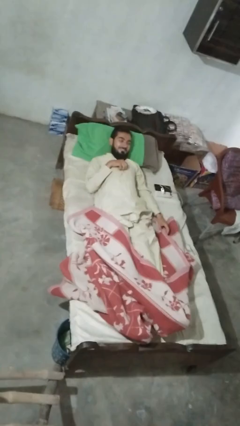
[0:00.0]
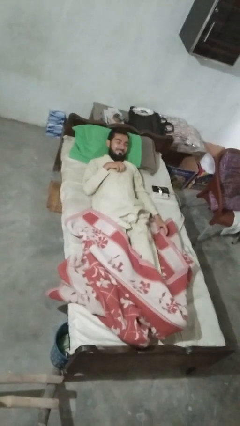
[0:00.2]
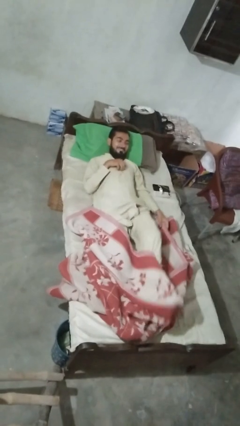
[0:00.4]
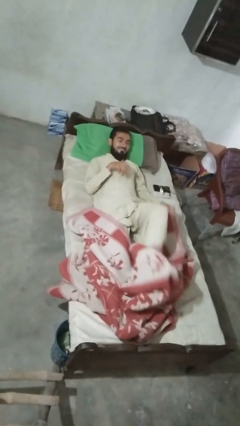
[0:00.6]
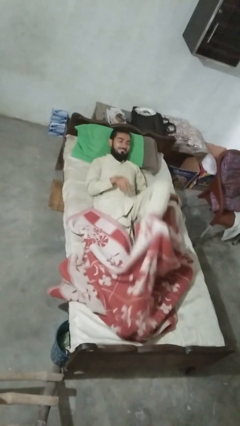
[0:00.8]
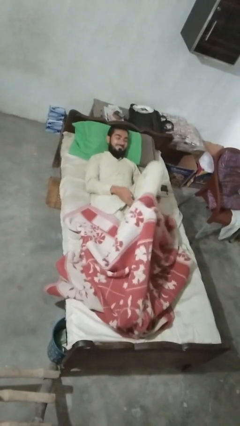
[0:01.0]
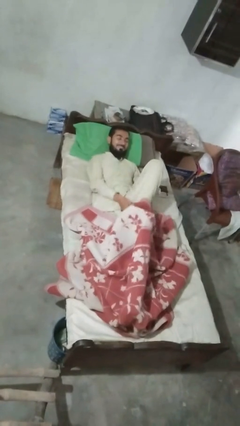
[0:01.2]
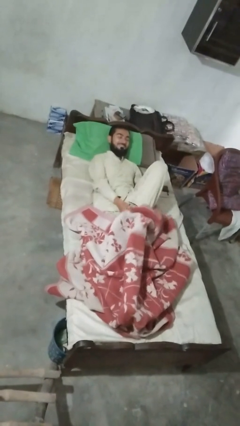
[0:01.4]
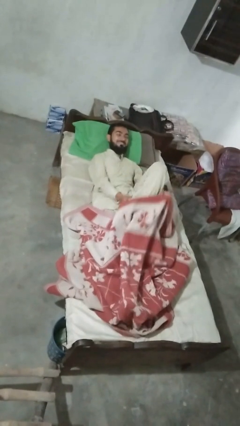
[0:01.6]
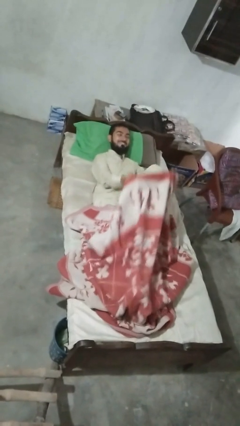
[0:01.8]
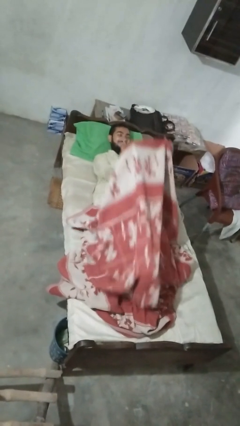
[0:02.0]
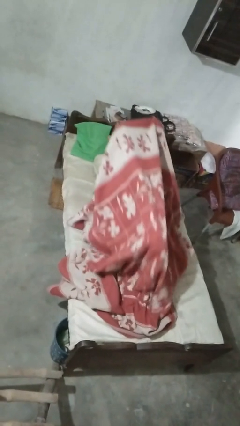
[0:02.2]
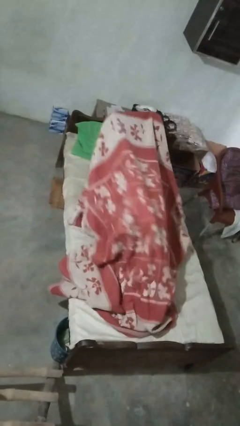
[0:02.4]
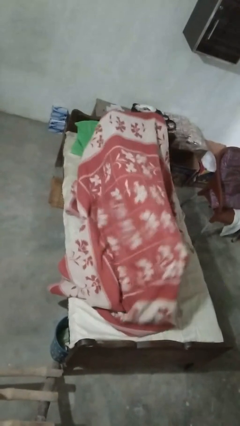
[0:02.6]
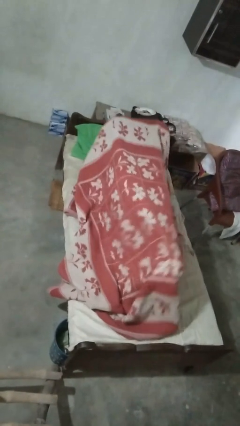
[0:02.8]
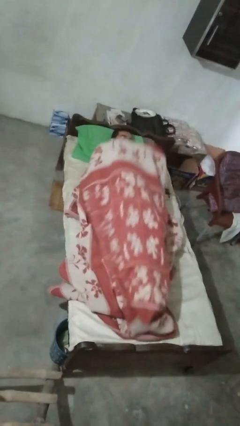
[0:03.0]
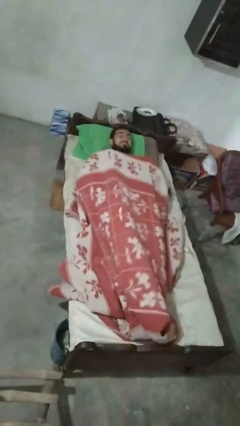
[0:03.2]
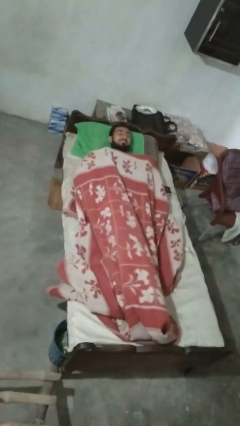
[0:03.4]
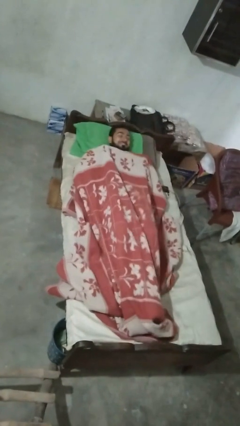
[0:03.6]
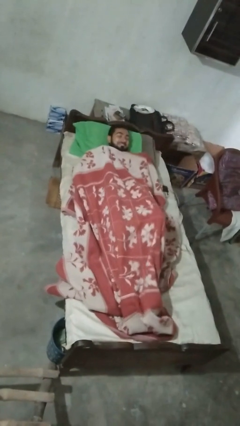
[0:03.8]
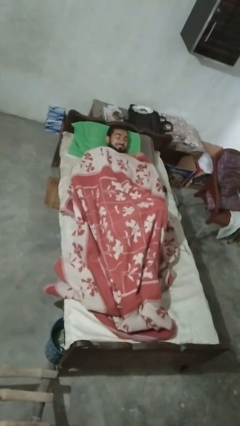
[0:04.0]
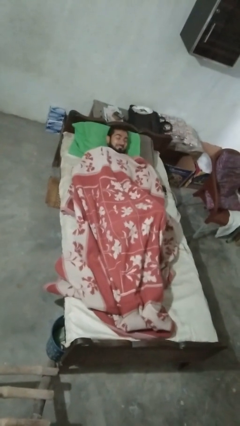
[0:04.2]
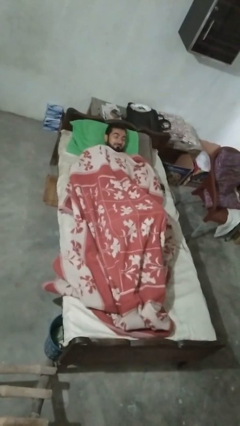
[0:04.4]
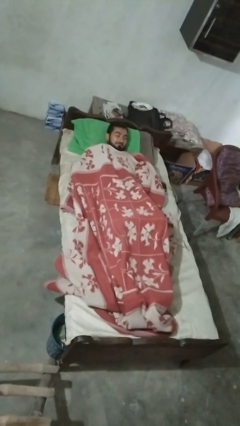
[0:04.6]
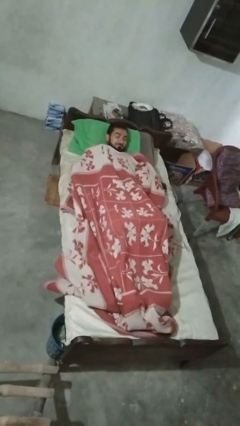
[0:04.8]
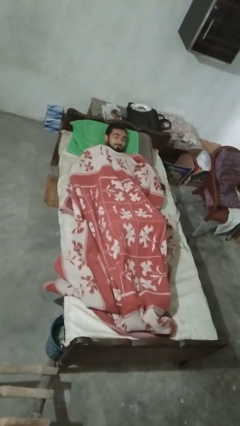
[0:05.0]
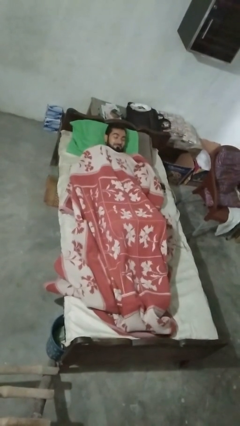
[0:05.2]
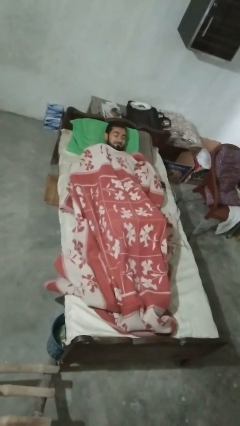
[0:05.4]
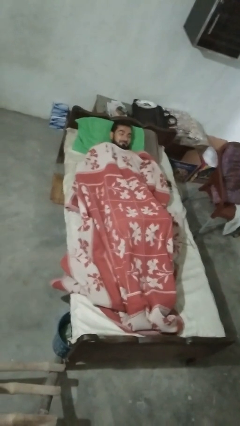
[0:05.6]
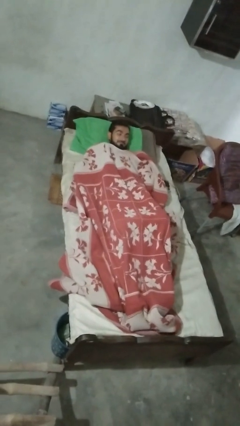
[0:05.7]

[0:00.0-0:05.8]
person covers with bedsheets

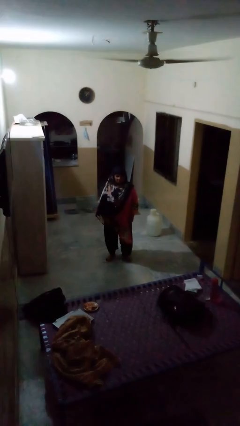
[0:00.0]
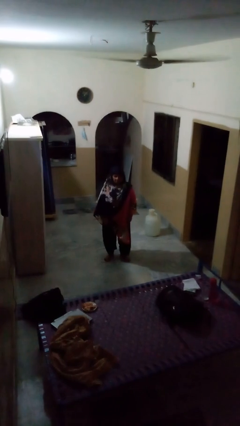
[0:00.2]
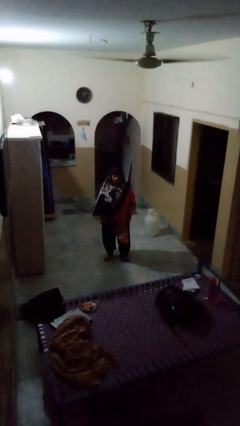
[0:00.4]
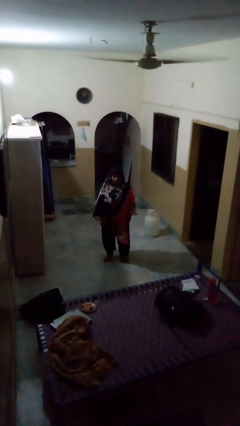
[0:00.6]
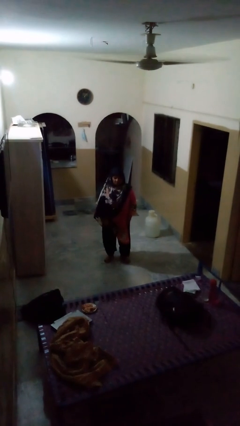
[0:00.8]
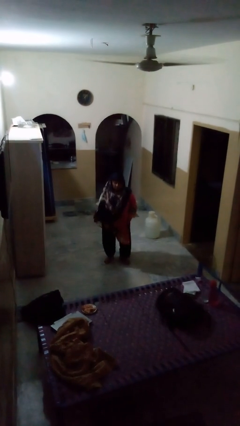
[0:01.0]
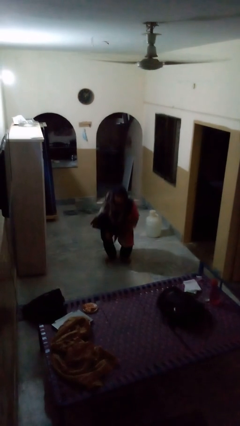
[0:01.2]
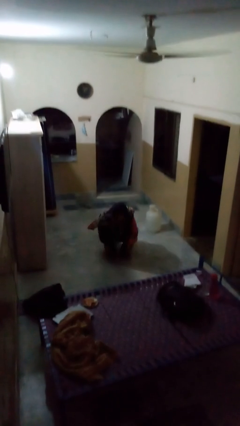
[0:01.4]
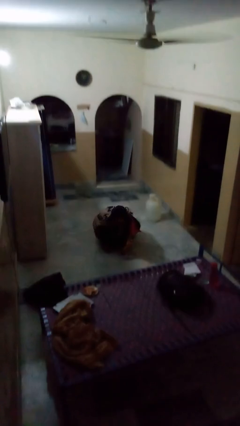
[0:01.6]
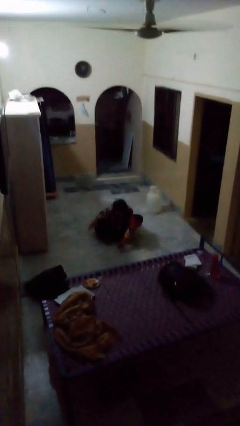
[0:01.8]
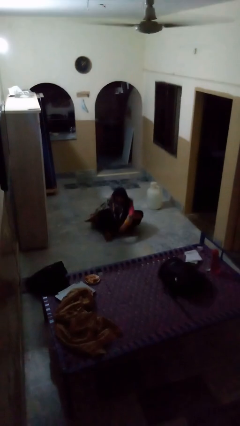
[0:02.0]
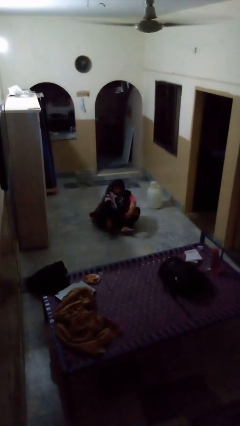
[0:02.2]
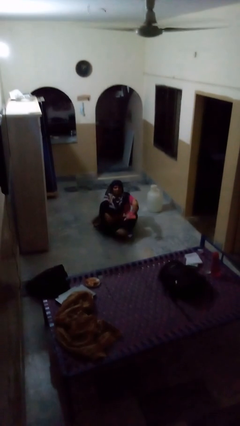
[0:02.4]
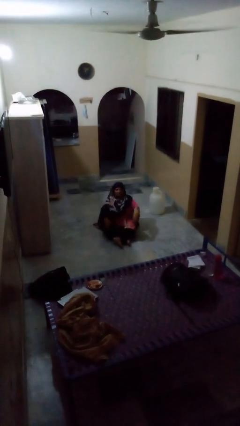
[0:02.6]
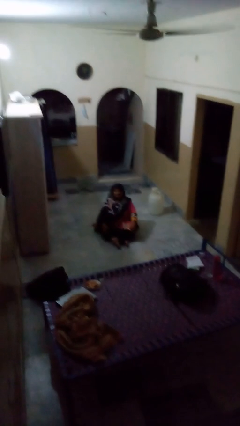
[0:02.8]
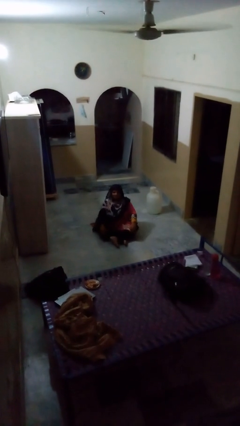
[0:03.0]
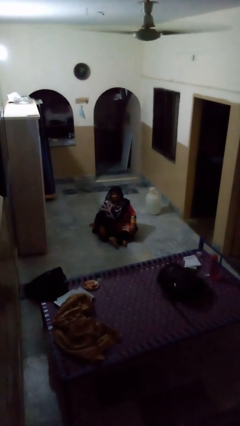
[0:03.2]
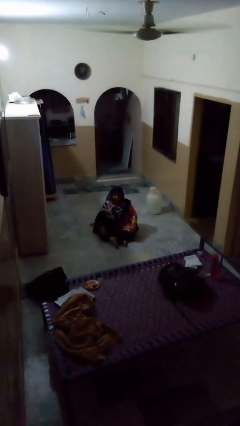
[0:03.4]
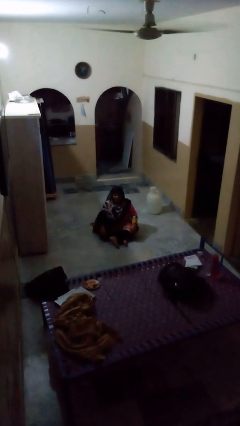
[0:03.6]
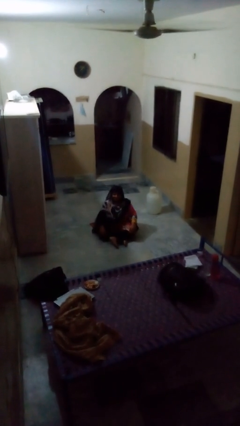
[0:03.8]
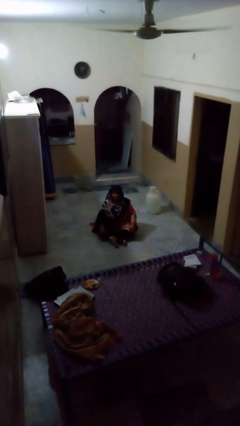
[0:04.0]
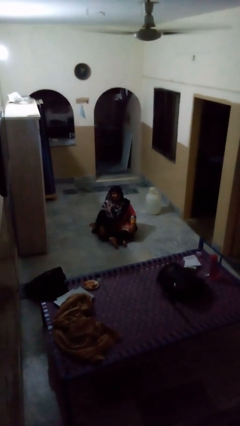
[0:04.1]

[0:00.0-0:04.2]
person sits crisscross

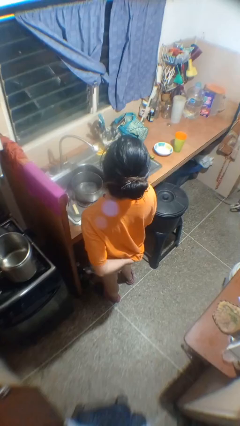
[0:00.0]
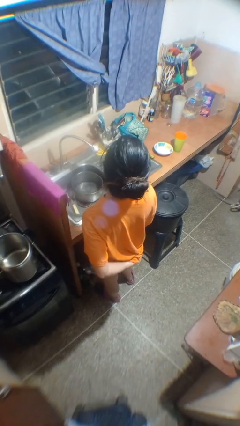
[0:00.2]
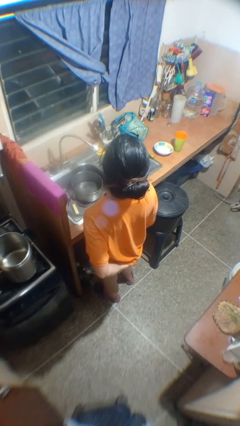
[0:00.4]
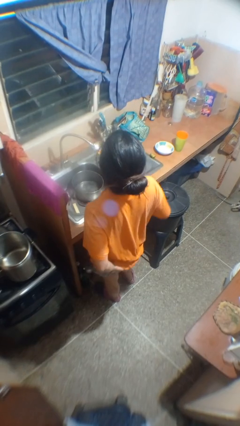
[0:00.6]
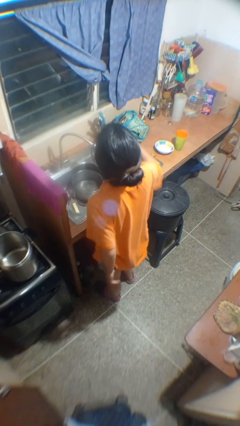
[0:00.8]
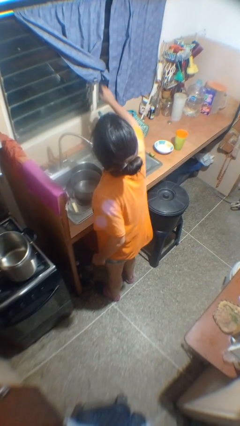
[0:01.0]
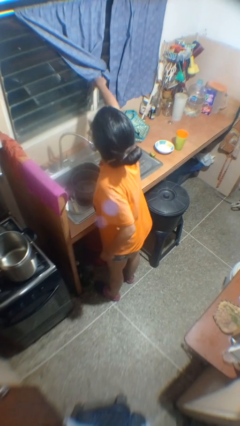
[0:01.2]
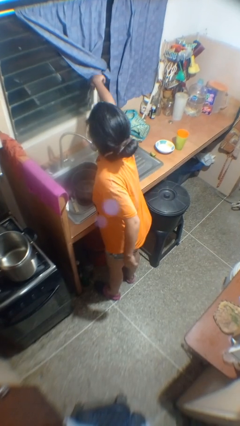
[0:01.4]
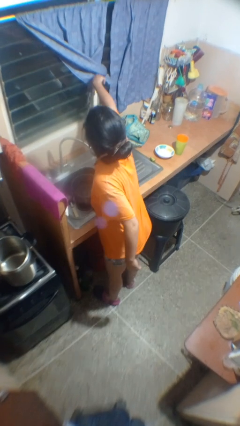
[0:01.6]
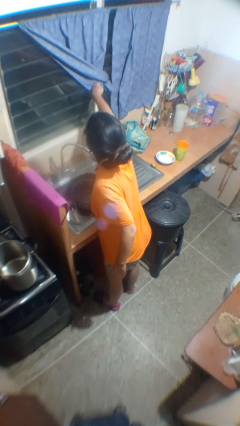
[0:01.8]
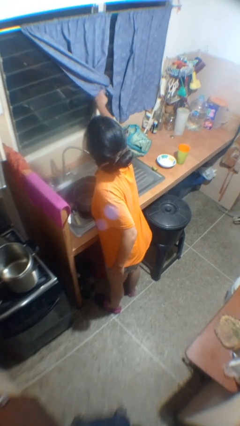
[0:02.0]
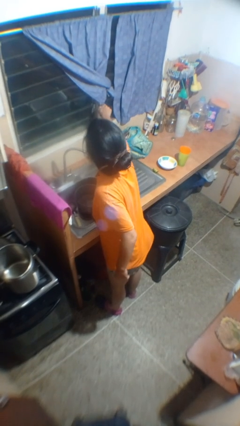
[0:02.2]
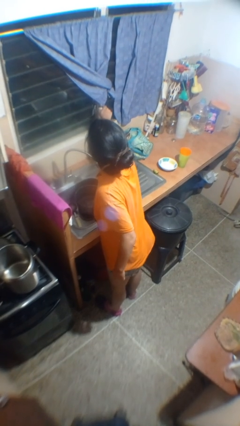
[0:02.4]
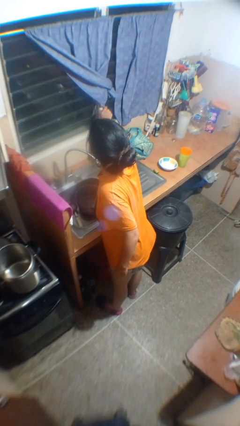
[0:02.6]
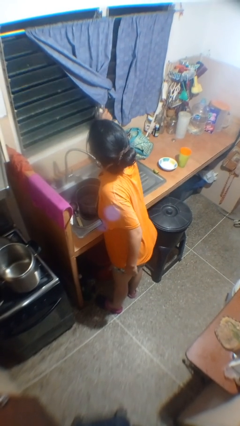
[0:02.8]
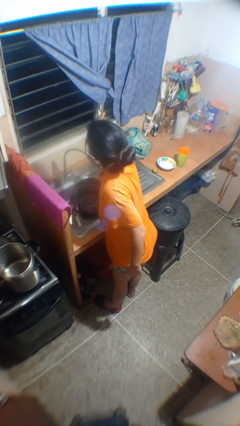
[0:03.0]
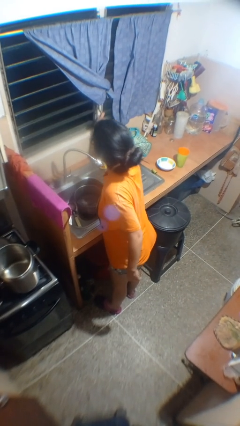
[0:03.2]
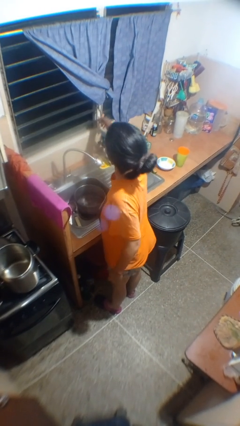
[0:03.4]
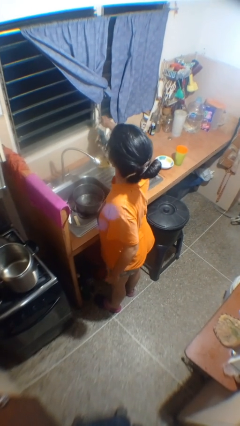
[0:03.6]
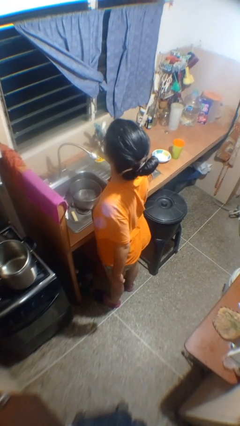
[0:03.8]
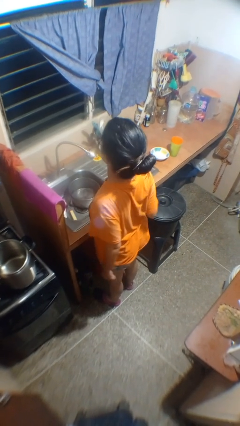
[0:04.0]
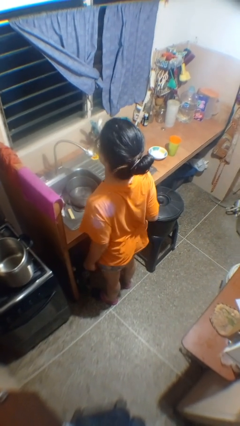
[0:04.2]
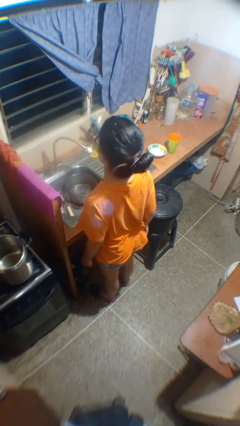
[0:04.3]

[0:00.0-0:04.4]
person opens home window

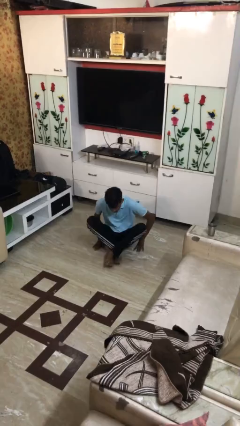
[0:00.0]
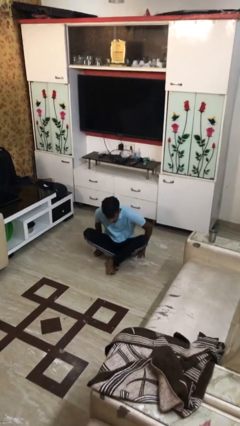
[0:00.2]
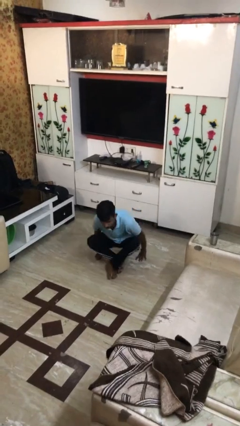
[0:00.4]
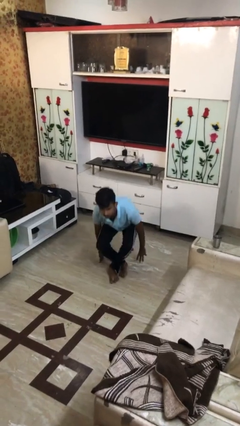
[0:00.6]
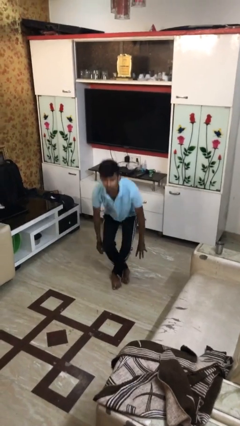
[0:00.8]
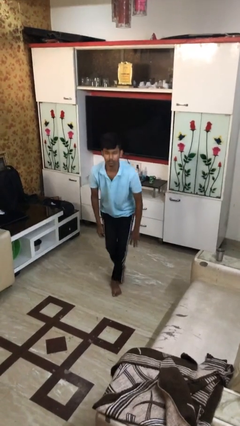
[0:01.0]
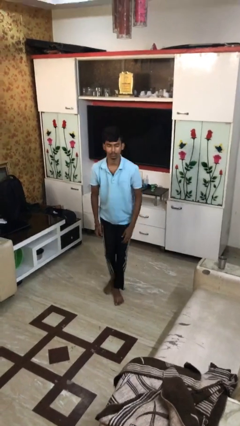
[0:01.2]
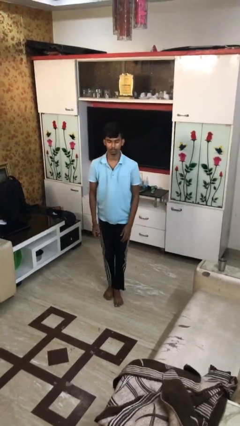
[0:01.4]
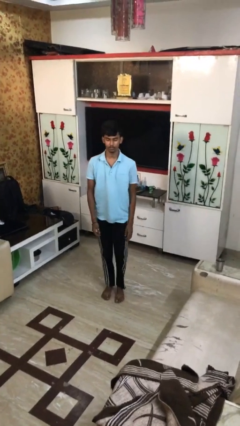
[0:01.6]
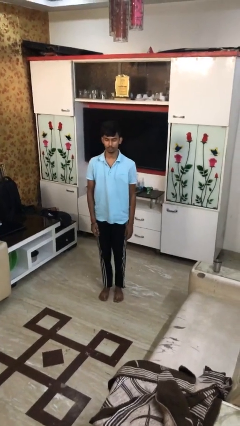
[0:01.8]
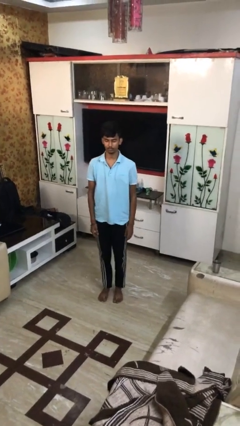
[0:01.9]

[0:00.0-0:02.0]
person stands up from floor

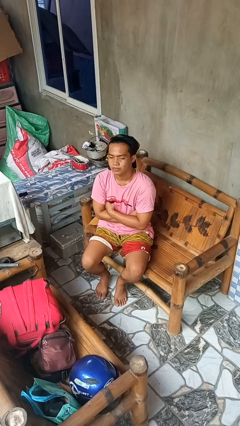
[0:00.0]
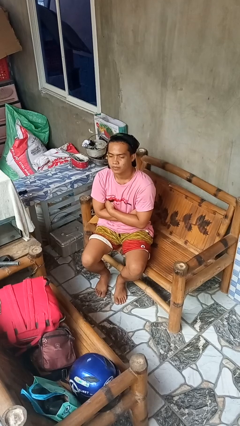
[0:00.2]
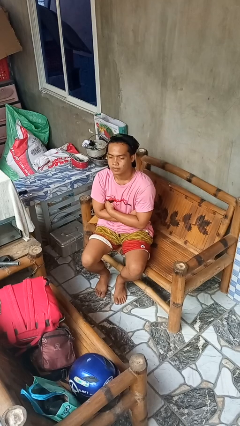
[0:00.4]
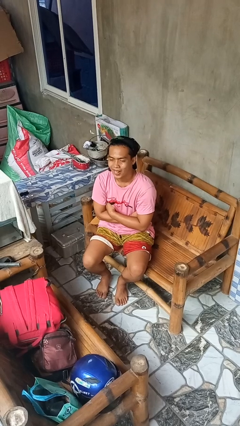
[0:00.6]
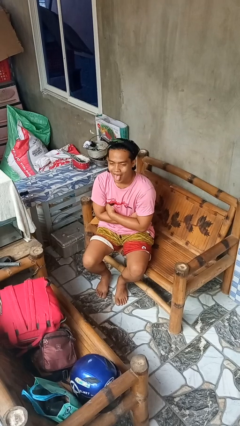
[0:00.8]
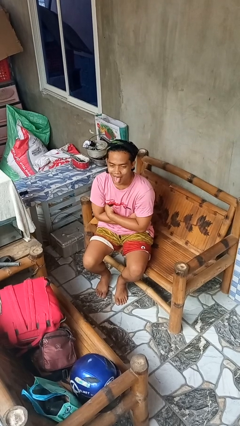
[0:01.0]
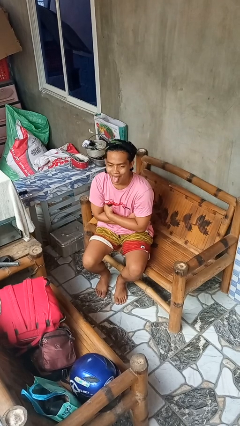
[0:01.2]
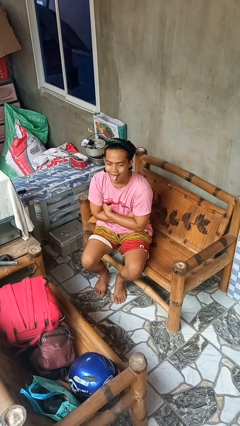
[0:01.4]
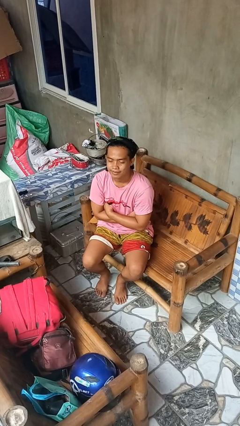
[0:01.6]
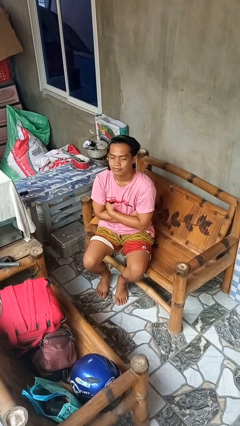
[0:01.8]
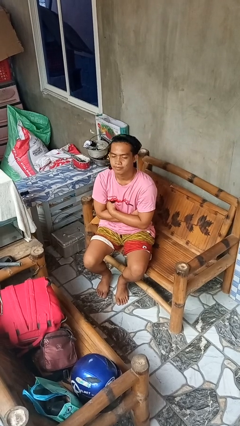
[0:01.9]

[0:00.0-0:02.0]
person sticks out tongue
